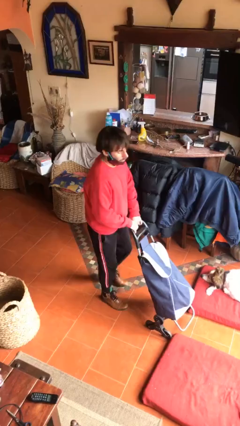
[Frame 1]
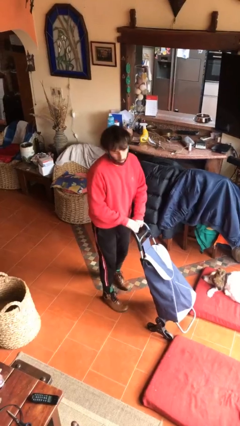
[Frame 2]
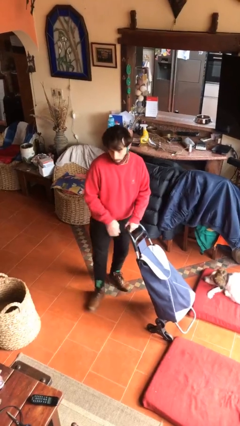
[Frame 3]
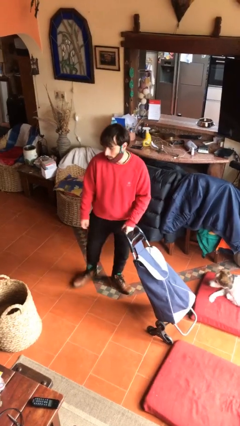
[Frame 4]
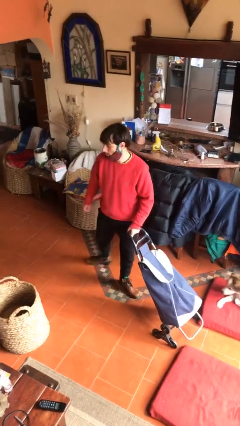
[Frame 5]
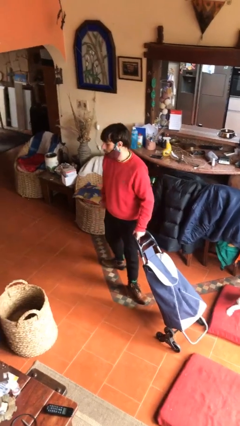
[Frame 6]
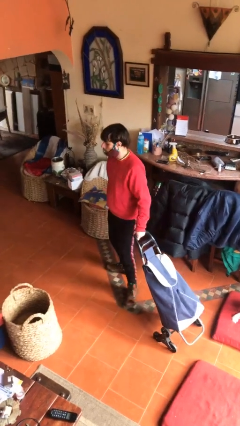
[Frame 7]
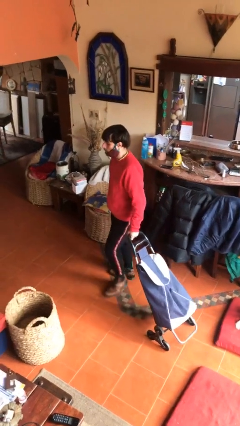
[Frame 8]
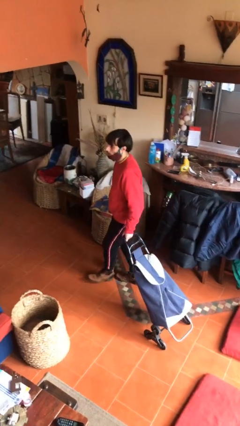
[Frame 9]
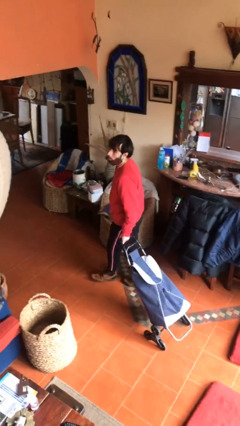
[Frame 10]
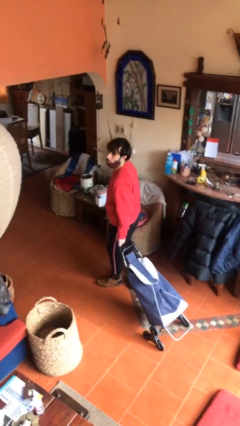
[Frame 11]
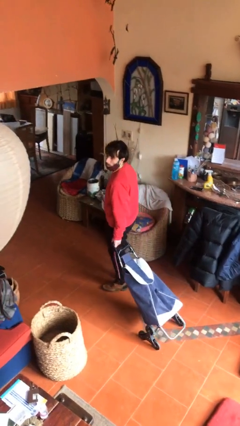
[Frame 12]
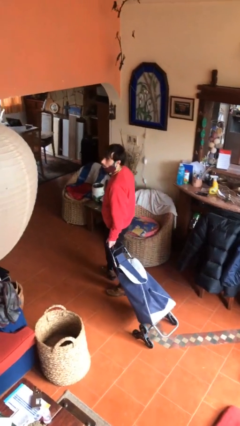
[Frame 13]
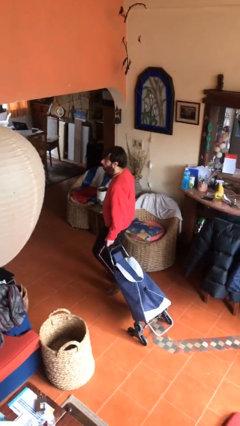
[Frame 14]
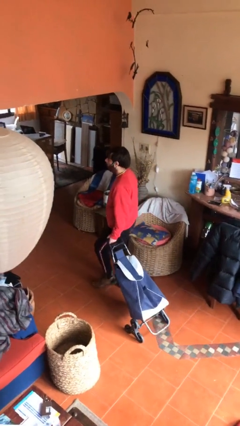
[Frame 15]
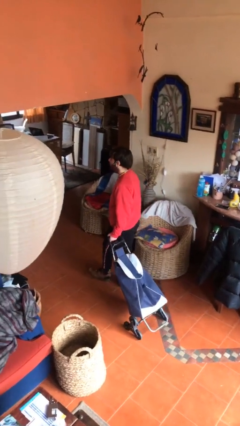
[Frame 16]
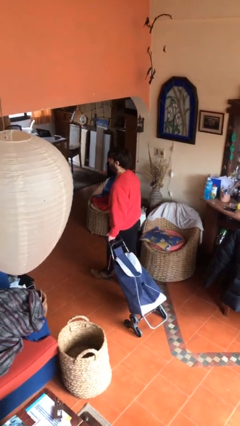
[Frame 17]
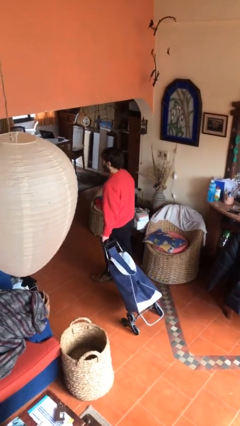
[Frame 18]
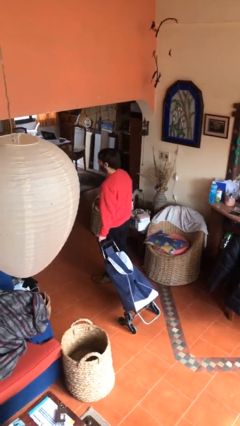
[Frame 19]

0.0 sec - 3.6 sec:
person pulls wheeled cart

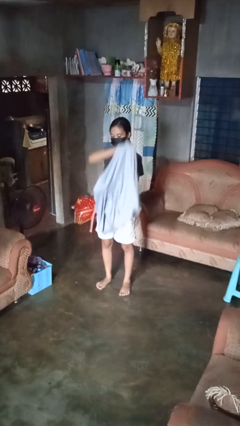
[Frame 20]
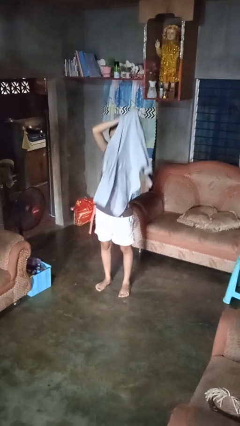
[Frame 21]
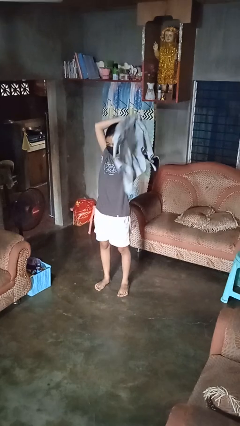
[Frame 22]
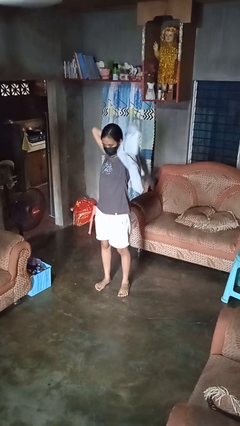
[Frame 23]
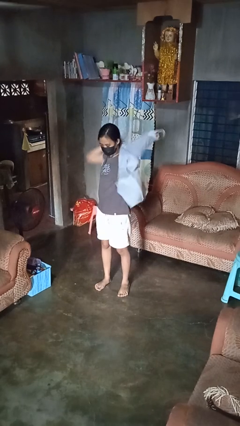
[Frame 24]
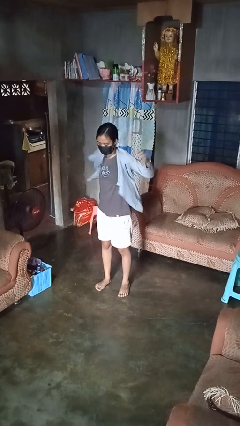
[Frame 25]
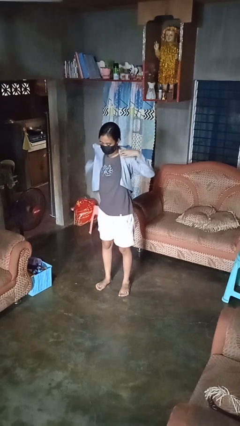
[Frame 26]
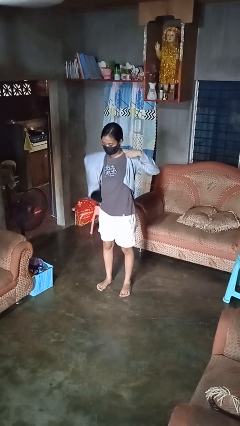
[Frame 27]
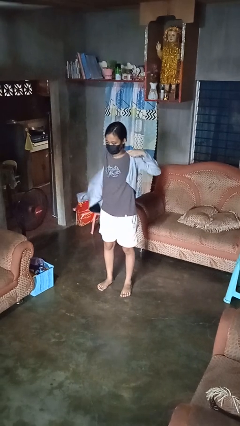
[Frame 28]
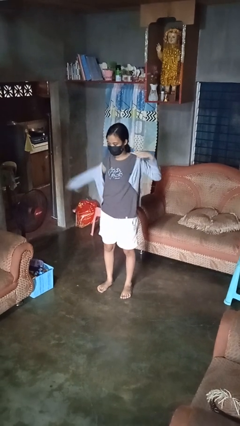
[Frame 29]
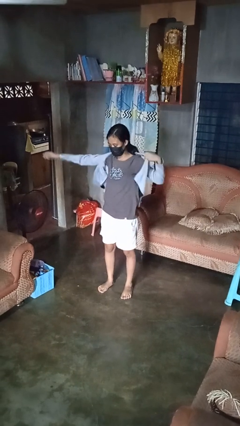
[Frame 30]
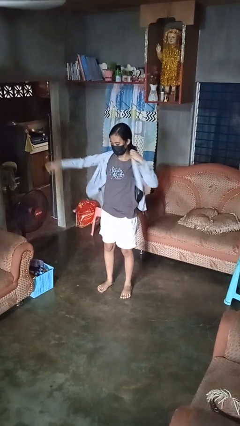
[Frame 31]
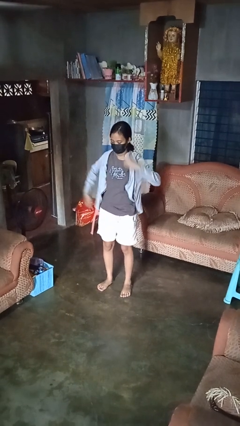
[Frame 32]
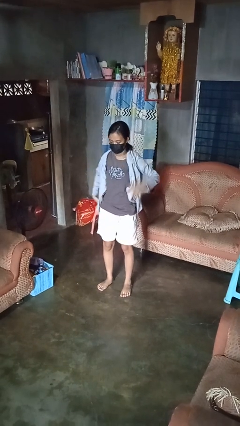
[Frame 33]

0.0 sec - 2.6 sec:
person puts on jacket

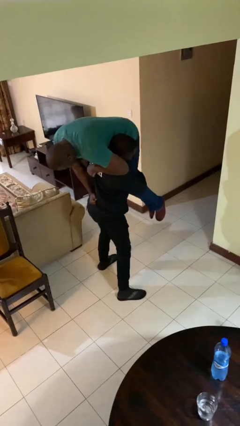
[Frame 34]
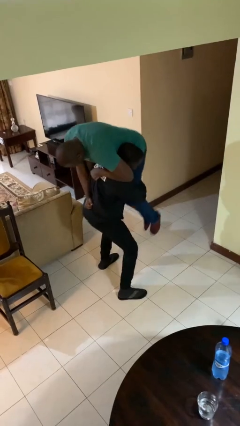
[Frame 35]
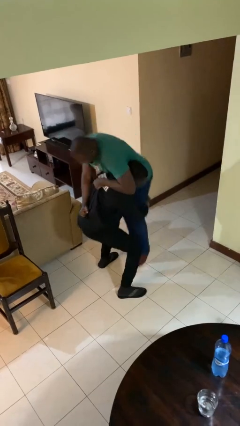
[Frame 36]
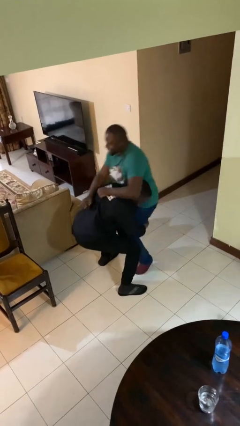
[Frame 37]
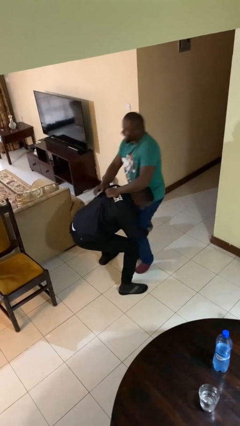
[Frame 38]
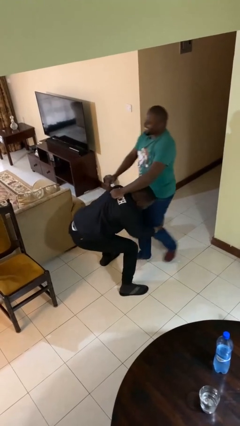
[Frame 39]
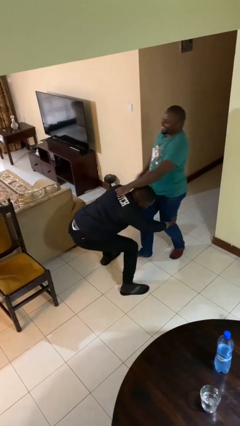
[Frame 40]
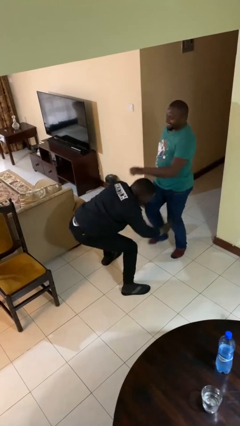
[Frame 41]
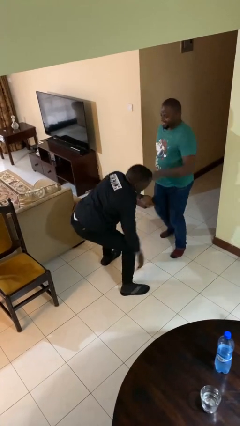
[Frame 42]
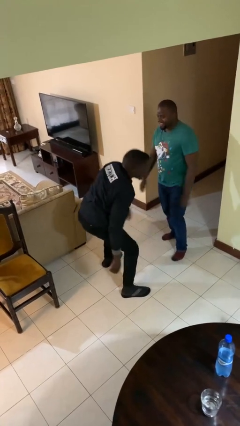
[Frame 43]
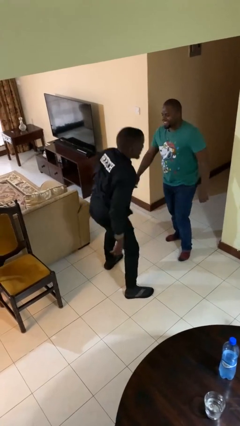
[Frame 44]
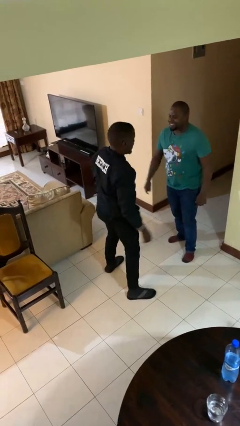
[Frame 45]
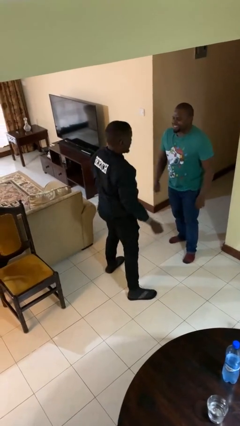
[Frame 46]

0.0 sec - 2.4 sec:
person puts down person

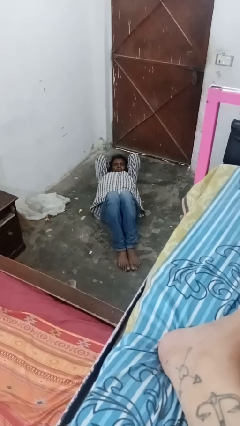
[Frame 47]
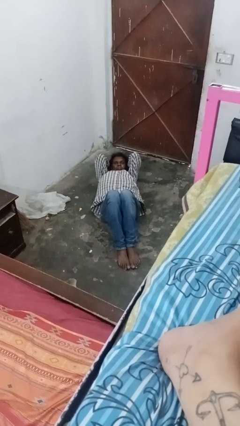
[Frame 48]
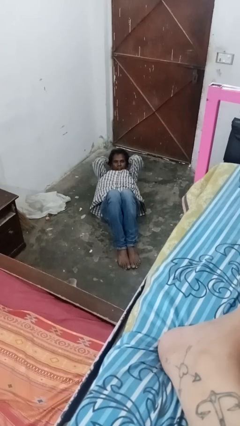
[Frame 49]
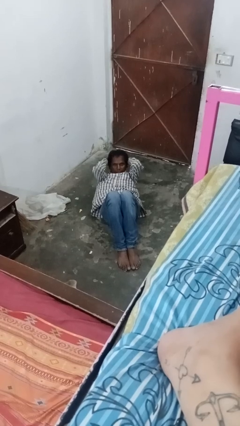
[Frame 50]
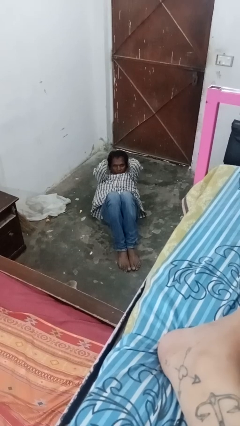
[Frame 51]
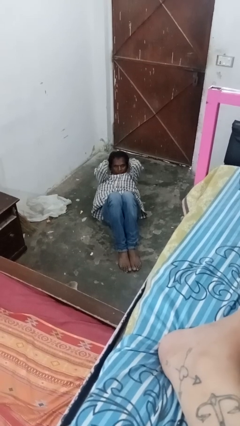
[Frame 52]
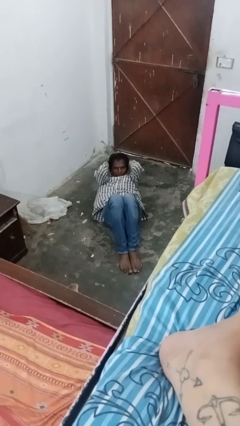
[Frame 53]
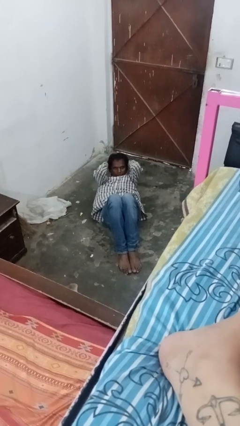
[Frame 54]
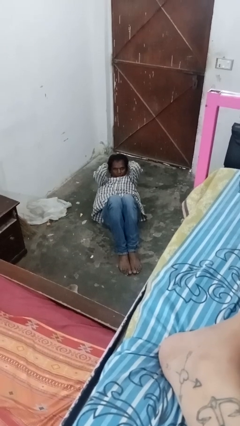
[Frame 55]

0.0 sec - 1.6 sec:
person exercises with situp

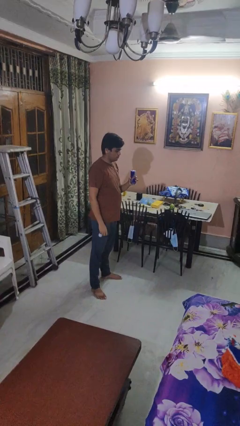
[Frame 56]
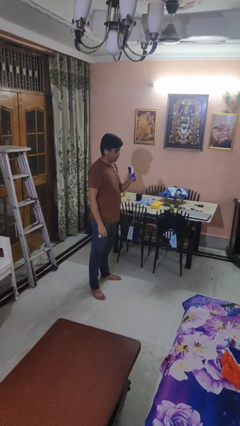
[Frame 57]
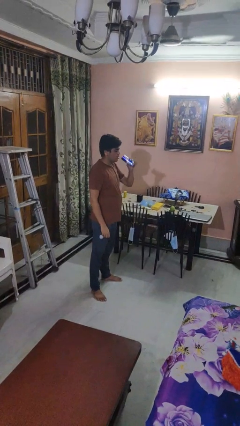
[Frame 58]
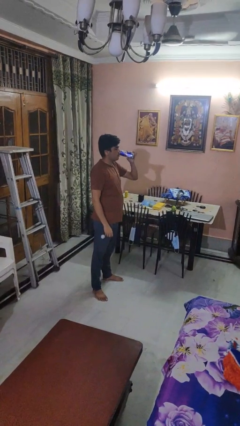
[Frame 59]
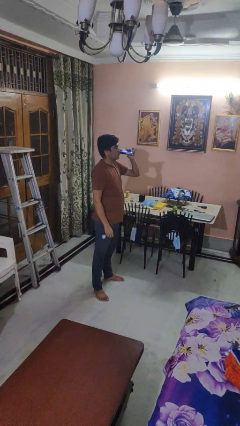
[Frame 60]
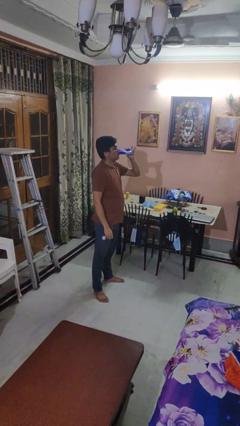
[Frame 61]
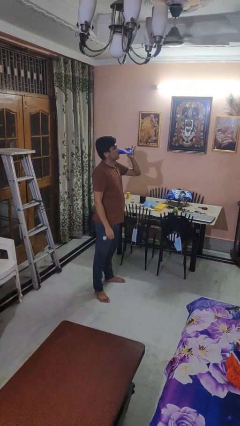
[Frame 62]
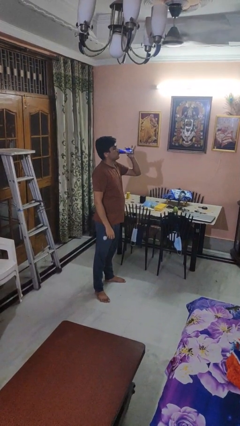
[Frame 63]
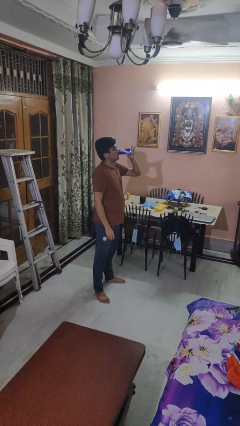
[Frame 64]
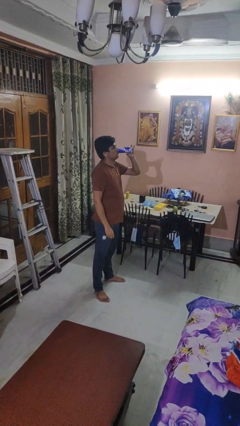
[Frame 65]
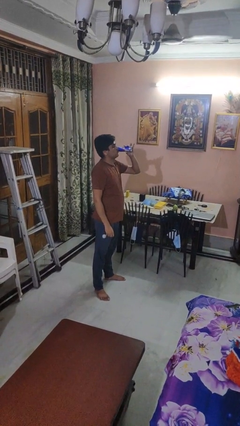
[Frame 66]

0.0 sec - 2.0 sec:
person drinks from beverage can

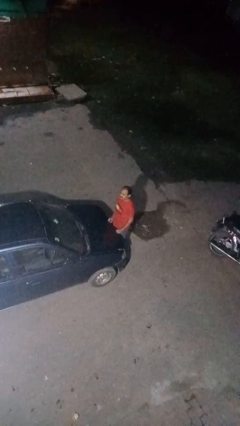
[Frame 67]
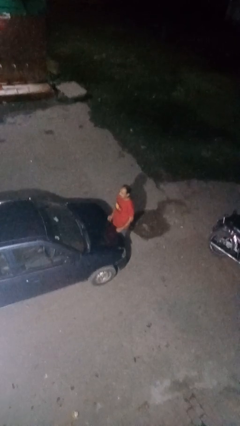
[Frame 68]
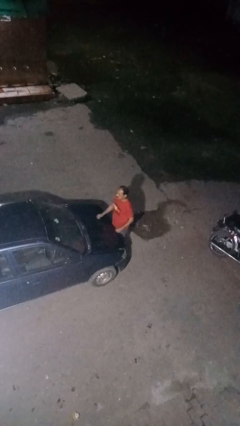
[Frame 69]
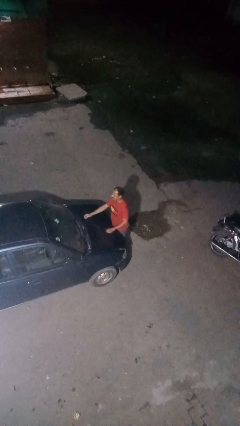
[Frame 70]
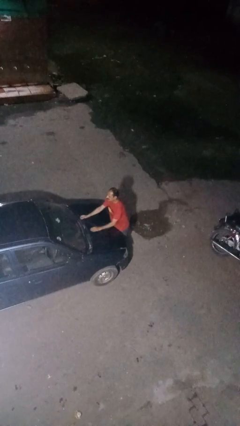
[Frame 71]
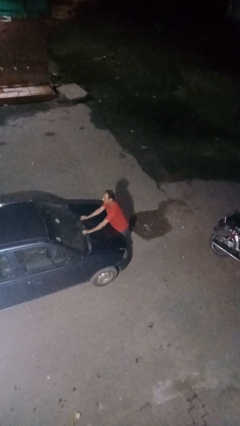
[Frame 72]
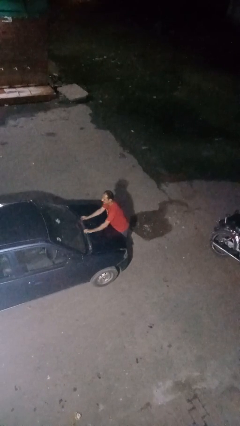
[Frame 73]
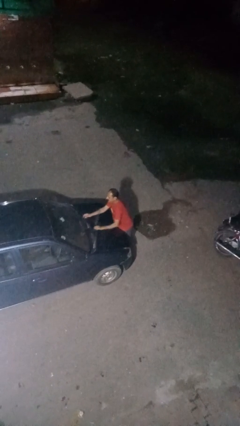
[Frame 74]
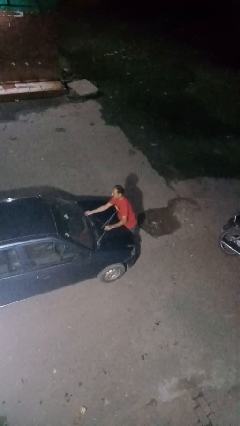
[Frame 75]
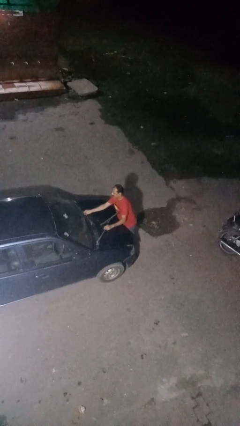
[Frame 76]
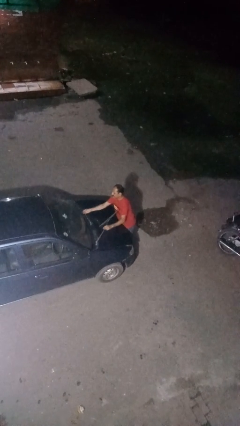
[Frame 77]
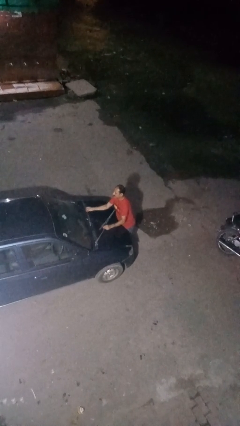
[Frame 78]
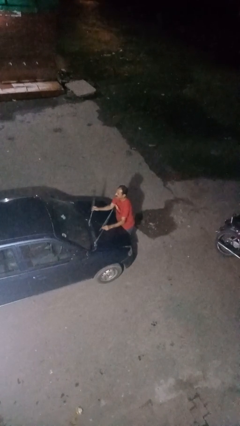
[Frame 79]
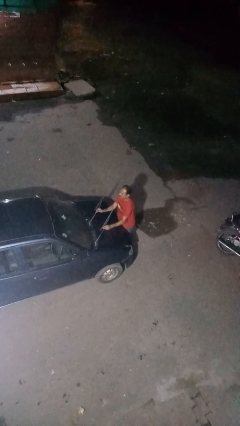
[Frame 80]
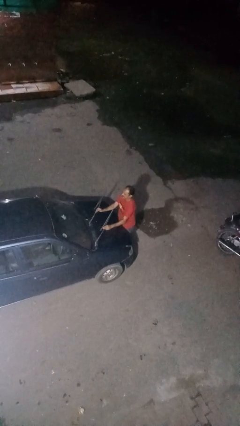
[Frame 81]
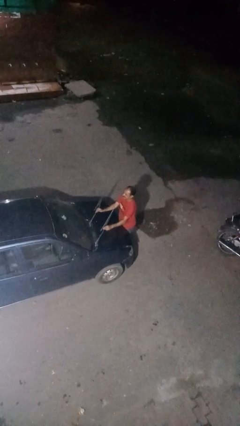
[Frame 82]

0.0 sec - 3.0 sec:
person flips up car wipers

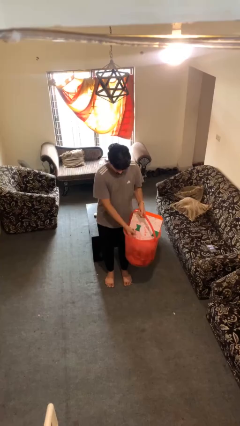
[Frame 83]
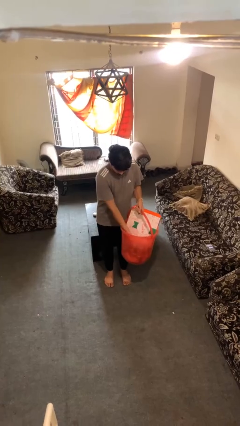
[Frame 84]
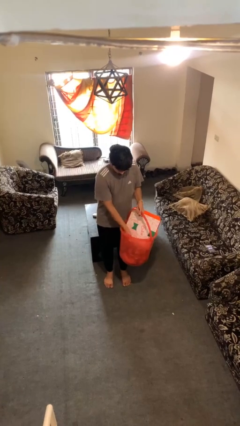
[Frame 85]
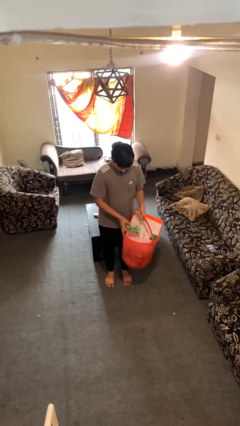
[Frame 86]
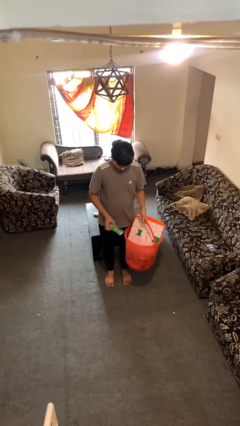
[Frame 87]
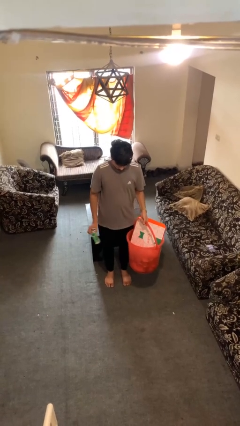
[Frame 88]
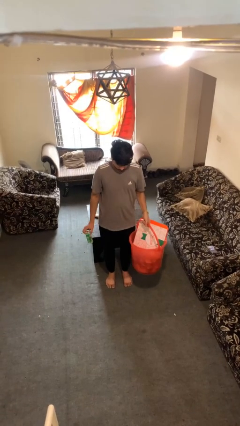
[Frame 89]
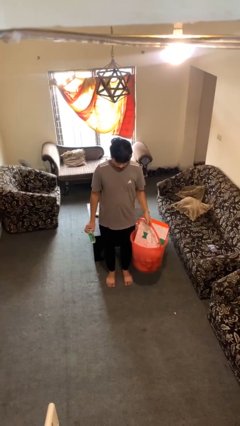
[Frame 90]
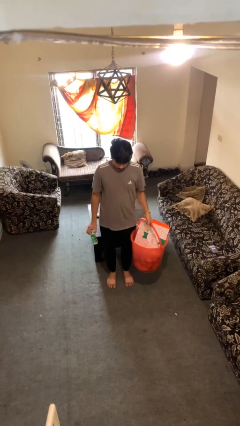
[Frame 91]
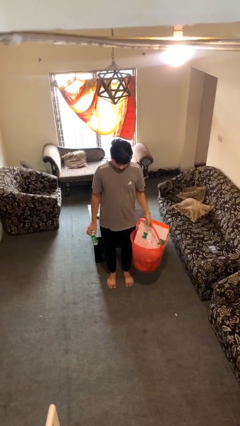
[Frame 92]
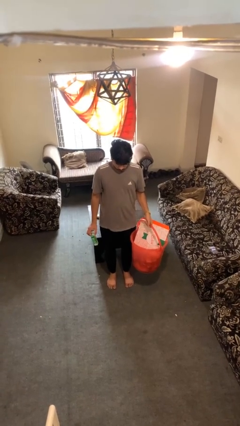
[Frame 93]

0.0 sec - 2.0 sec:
person takes object from basket
